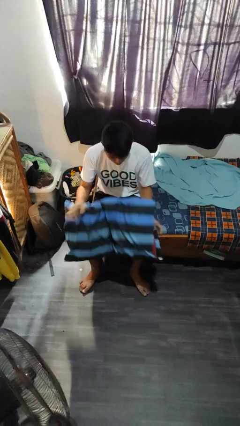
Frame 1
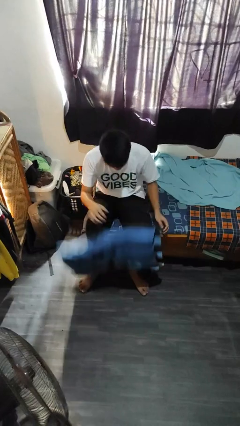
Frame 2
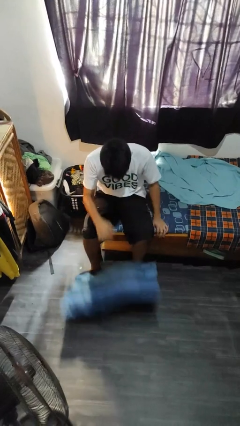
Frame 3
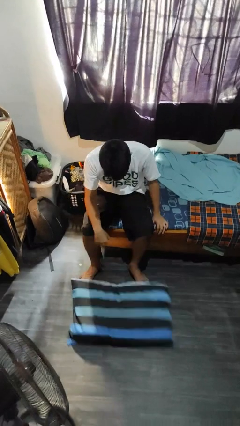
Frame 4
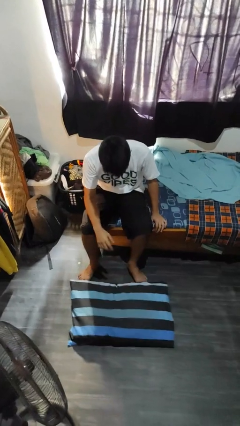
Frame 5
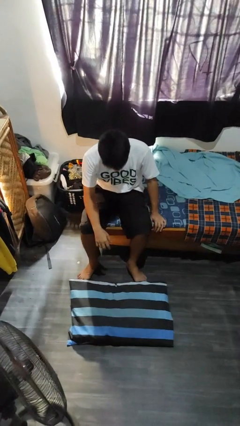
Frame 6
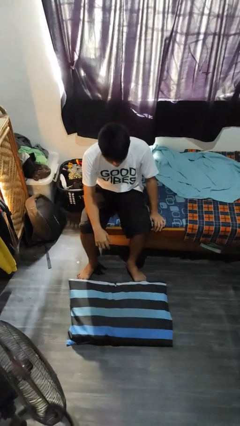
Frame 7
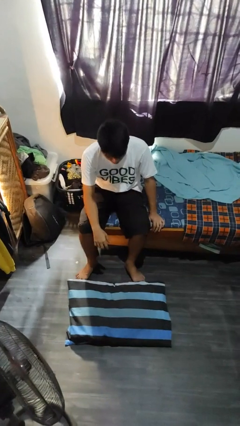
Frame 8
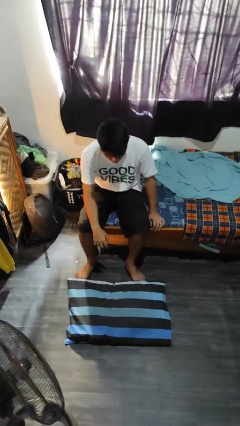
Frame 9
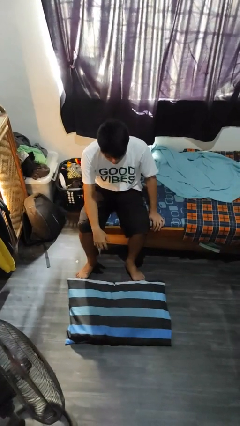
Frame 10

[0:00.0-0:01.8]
person drops object

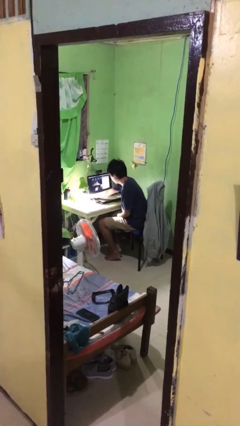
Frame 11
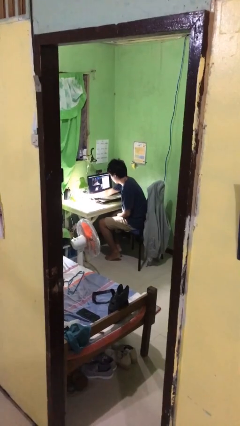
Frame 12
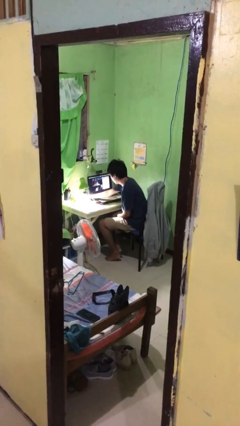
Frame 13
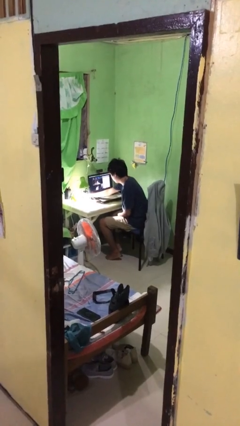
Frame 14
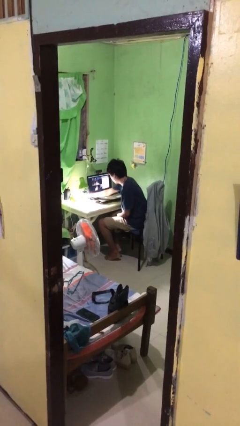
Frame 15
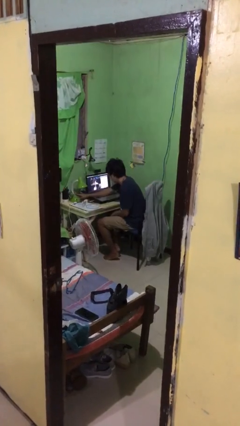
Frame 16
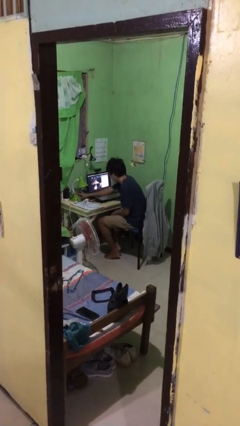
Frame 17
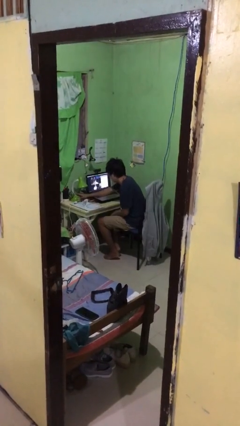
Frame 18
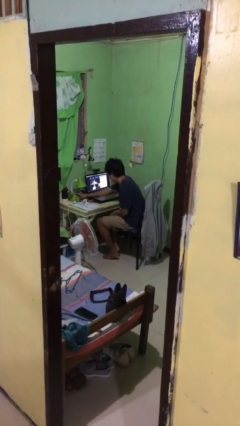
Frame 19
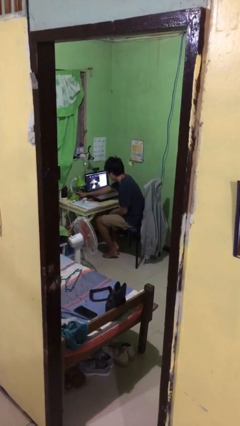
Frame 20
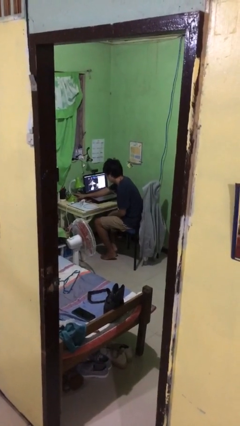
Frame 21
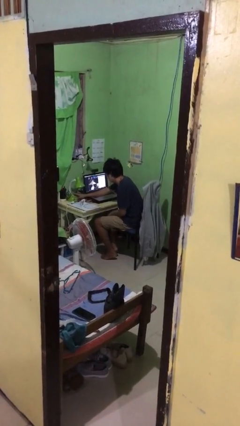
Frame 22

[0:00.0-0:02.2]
person turns off lamp

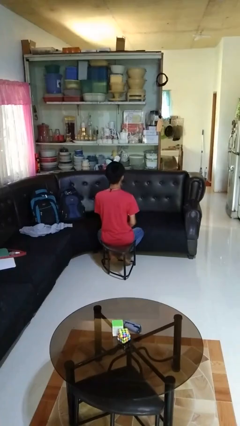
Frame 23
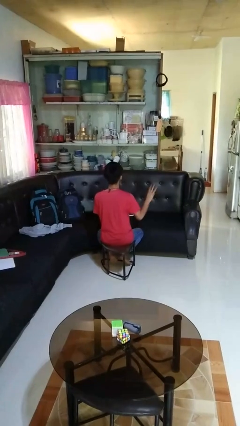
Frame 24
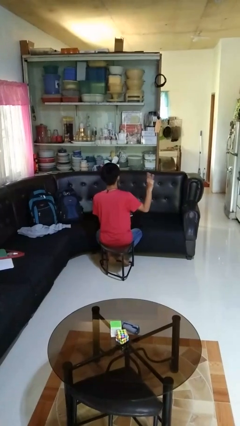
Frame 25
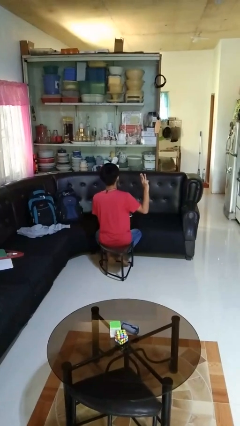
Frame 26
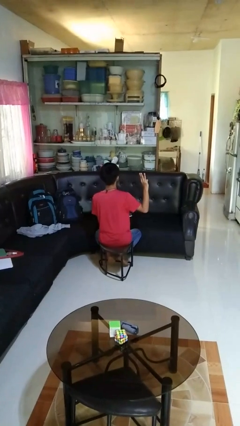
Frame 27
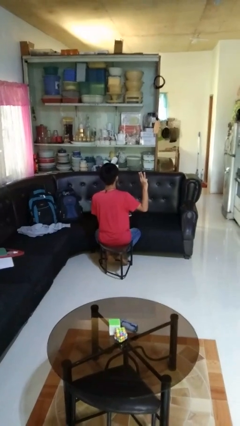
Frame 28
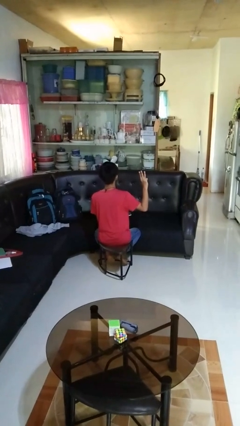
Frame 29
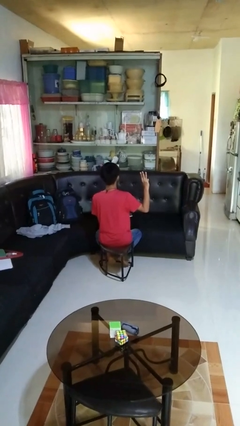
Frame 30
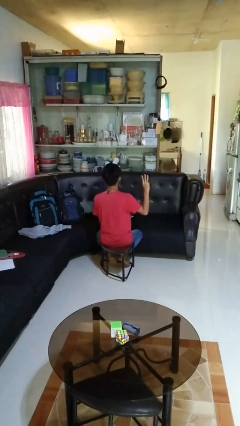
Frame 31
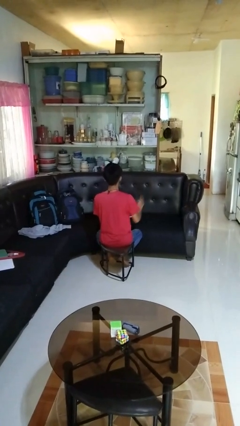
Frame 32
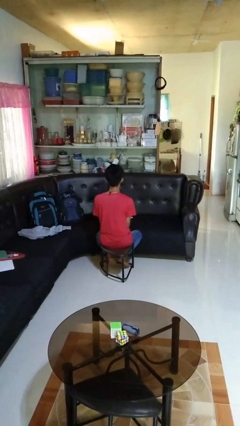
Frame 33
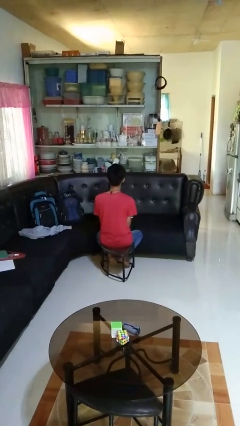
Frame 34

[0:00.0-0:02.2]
person gestures number three

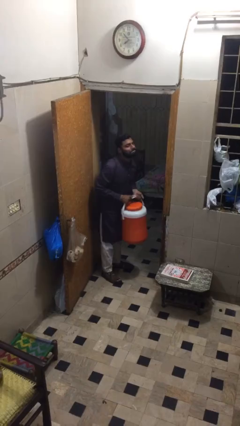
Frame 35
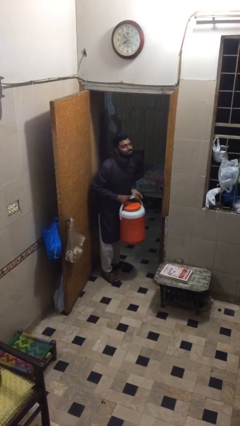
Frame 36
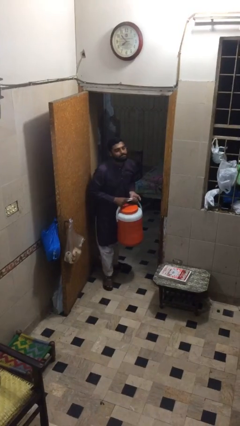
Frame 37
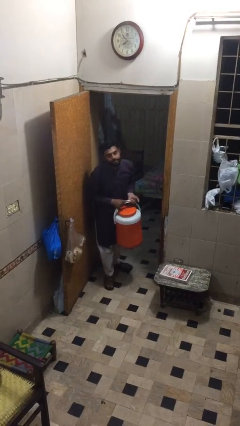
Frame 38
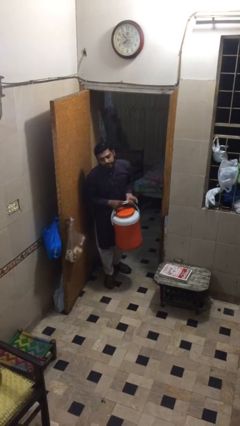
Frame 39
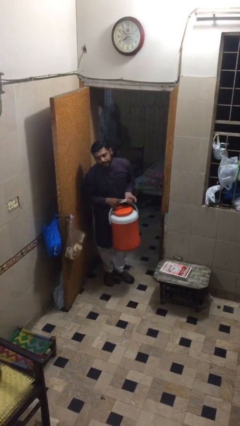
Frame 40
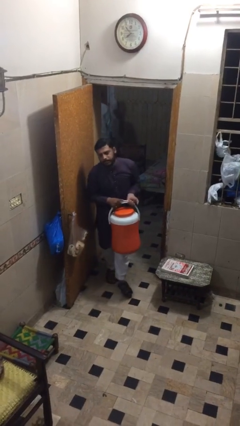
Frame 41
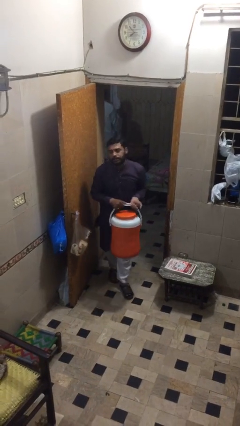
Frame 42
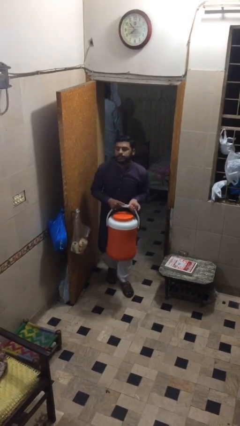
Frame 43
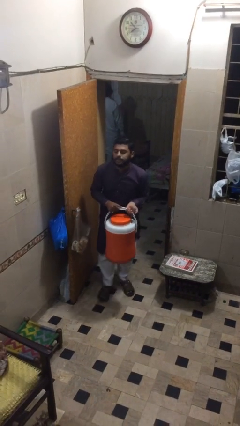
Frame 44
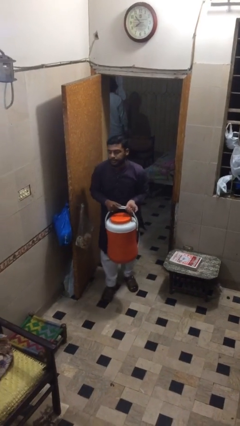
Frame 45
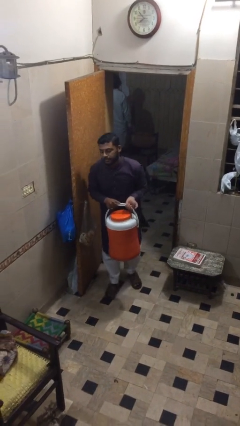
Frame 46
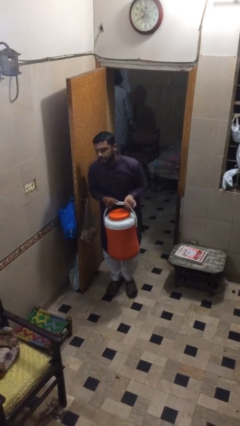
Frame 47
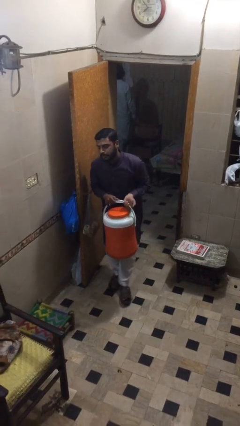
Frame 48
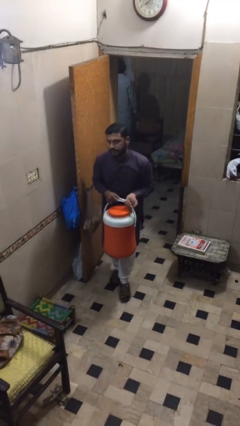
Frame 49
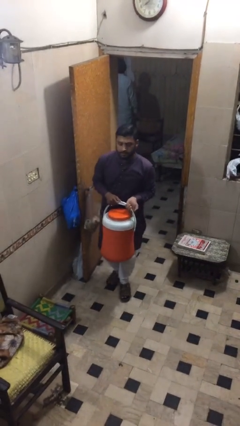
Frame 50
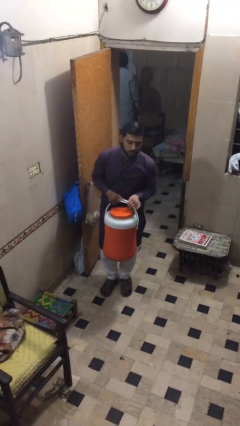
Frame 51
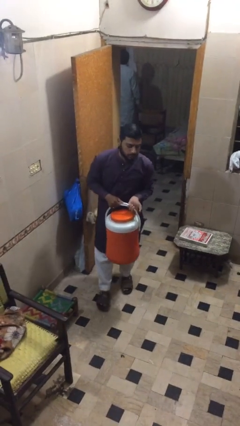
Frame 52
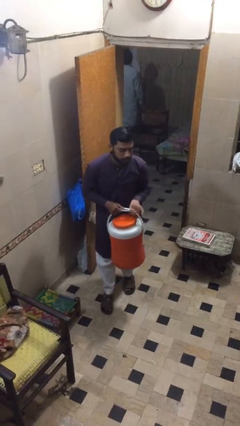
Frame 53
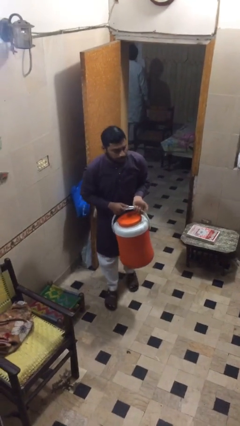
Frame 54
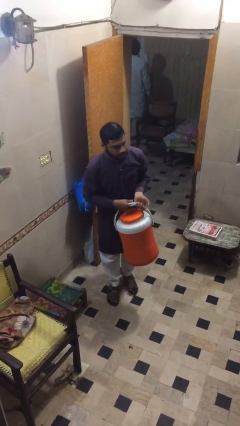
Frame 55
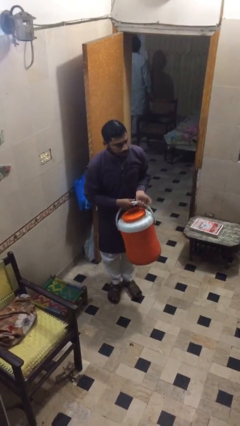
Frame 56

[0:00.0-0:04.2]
person carries heavy object

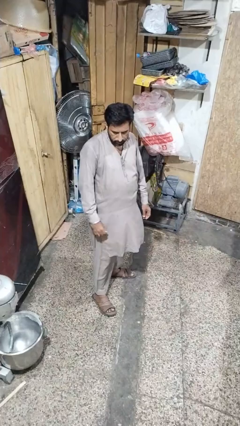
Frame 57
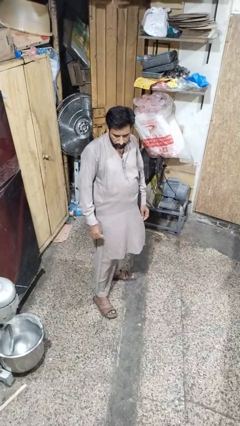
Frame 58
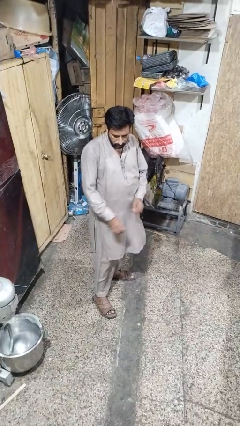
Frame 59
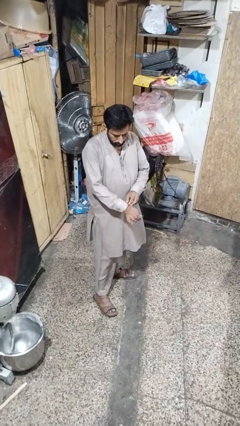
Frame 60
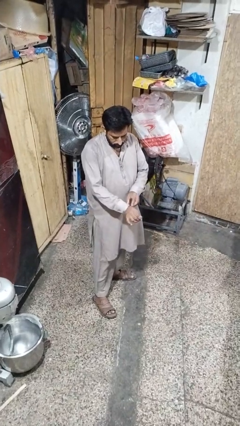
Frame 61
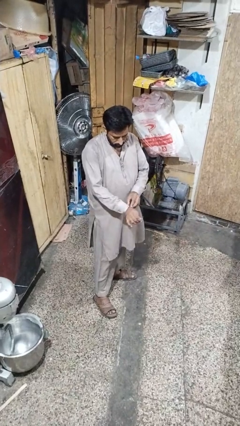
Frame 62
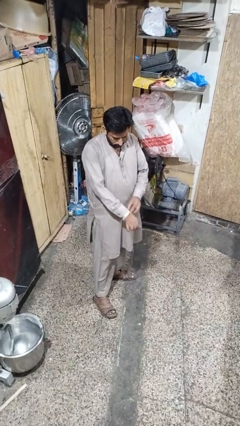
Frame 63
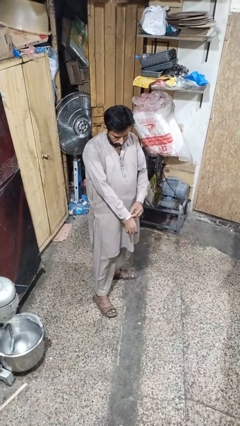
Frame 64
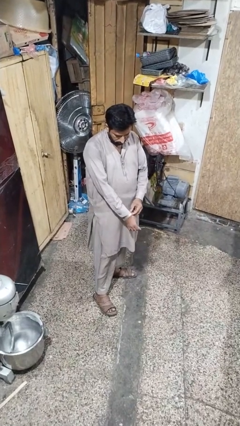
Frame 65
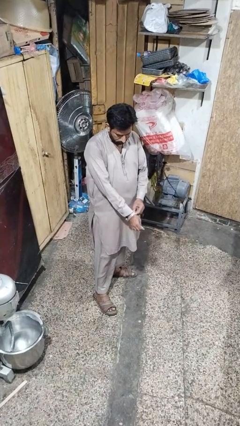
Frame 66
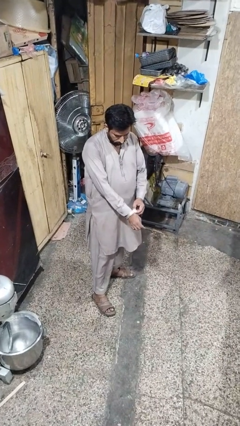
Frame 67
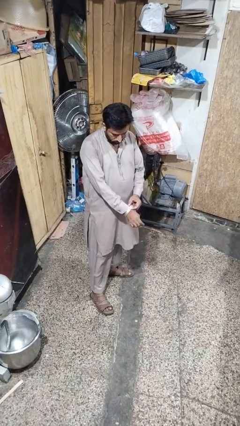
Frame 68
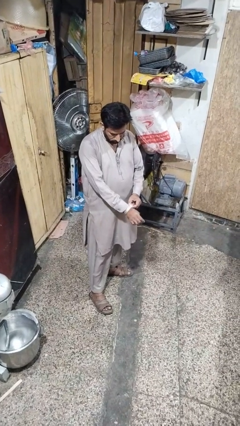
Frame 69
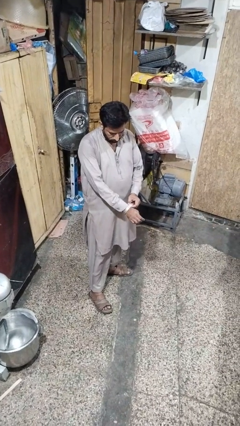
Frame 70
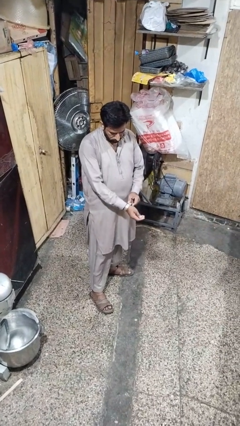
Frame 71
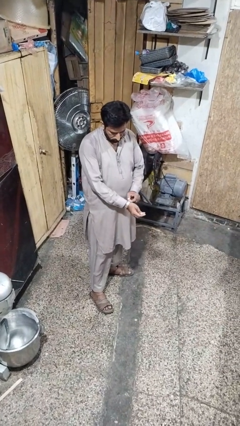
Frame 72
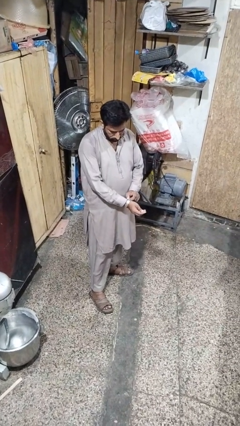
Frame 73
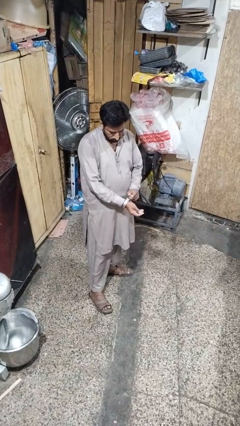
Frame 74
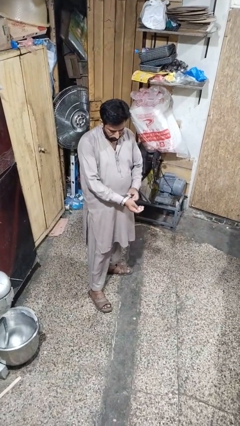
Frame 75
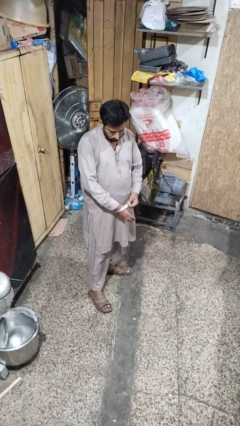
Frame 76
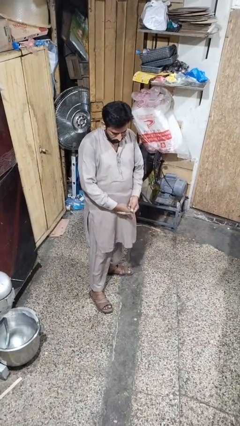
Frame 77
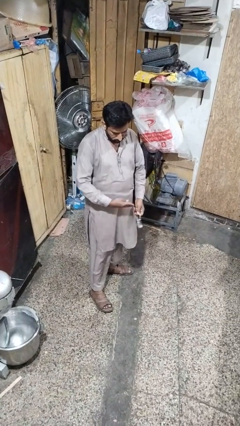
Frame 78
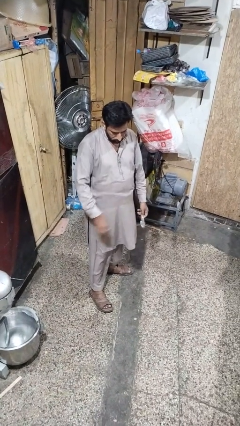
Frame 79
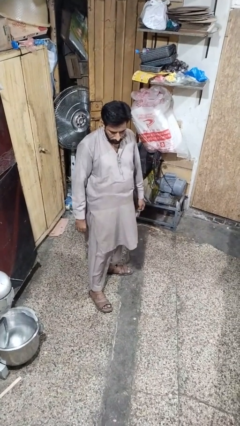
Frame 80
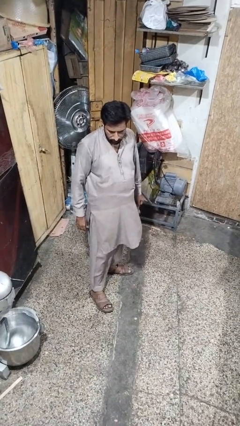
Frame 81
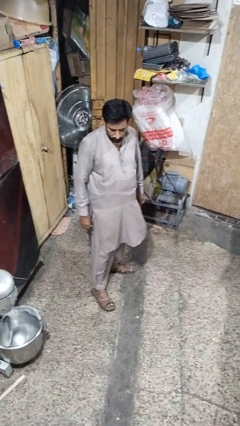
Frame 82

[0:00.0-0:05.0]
person takes off wristwatch

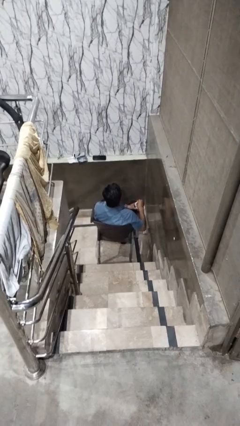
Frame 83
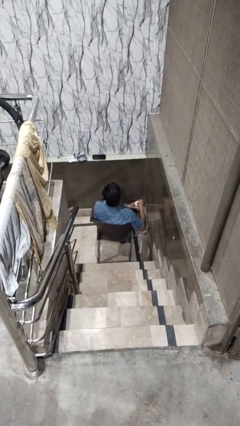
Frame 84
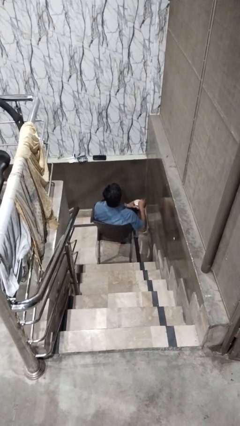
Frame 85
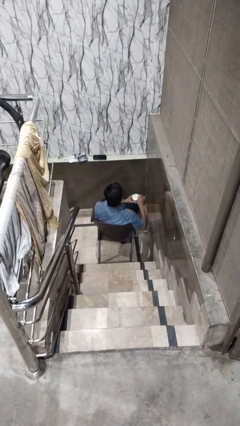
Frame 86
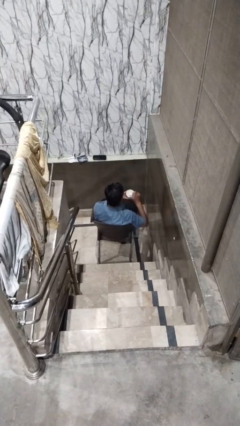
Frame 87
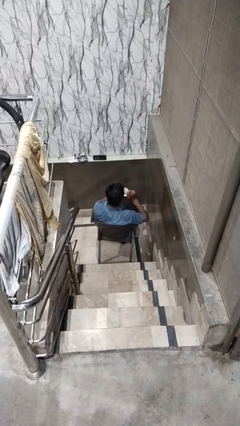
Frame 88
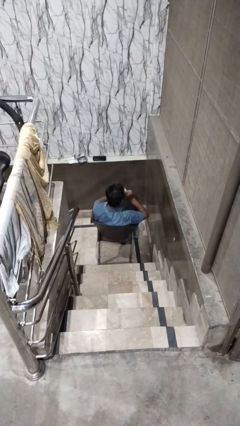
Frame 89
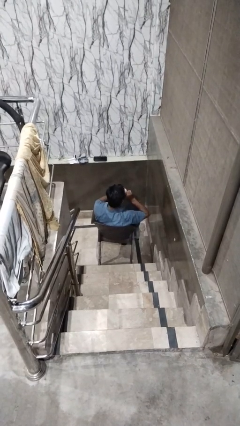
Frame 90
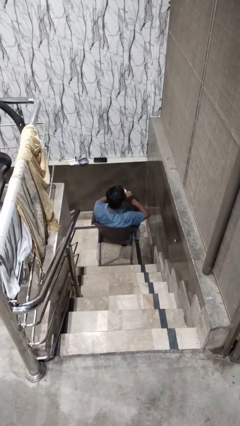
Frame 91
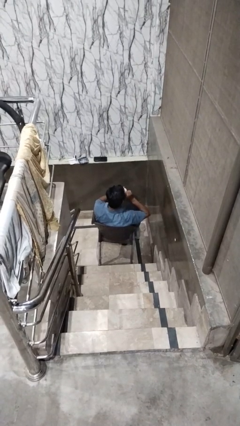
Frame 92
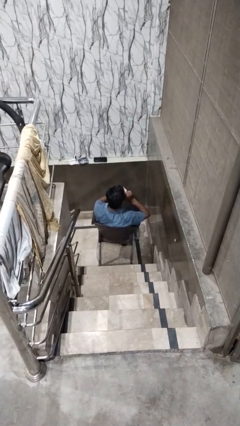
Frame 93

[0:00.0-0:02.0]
person drinks from mug
